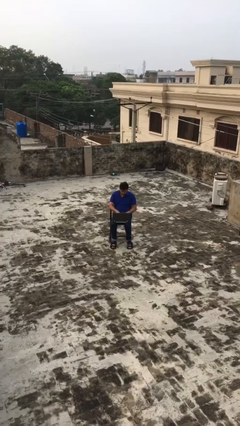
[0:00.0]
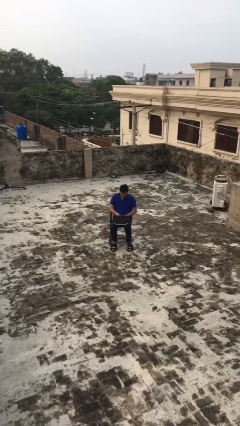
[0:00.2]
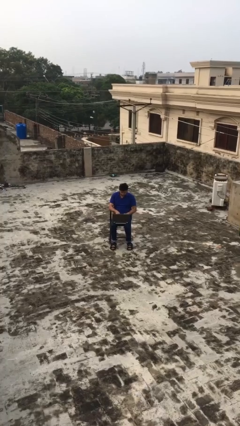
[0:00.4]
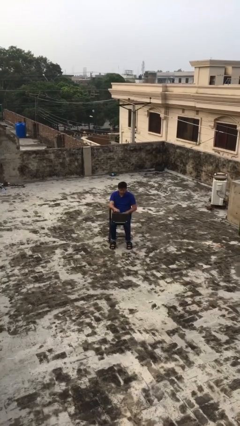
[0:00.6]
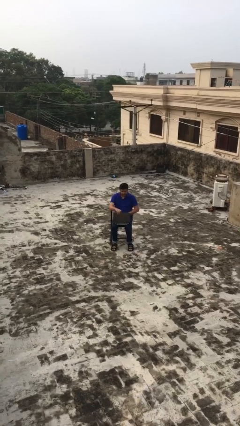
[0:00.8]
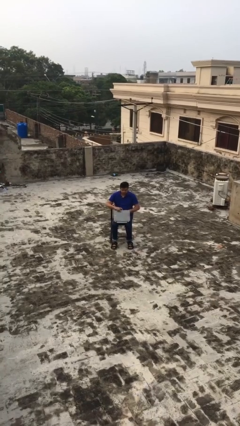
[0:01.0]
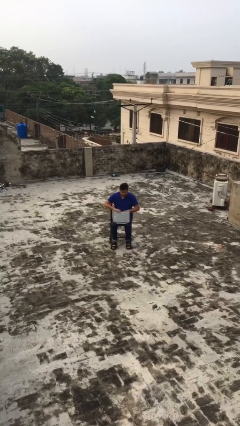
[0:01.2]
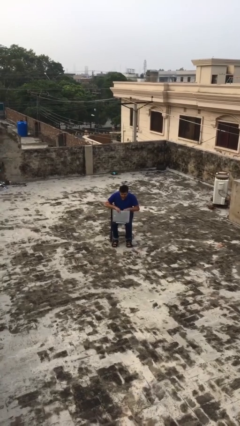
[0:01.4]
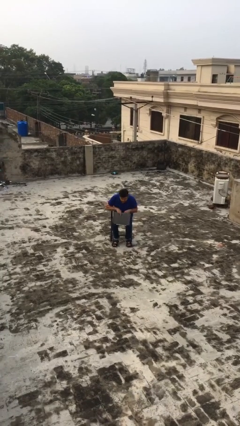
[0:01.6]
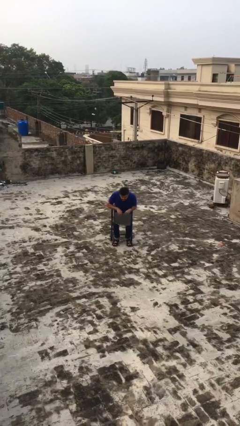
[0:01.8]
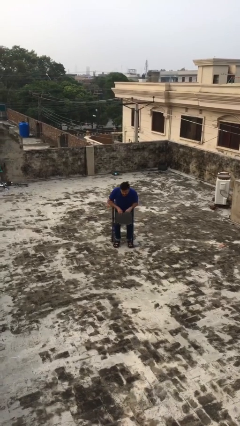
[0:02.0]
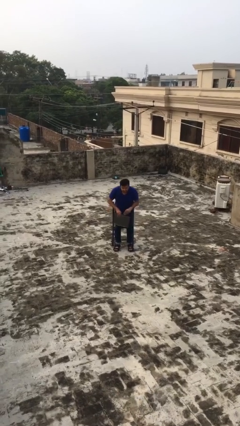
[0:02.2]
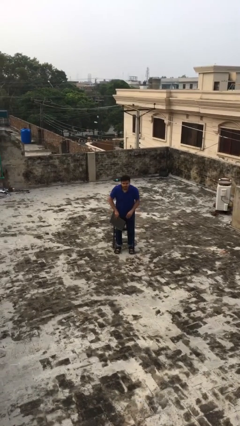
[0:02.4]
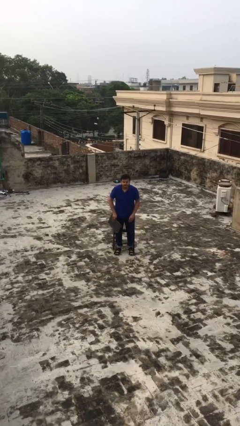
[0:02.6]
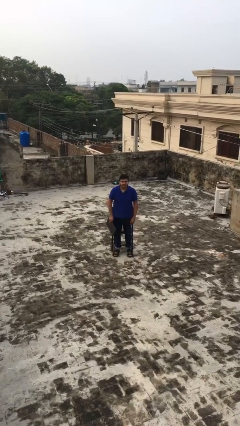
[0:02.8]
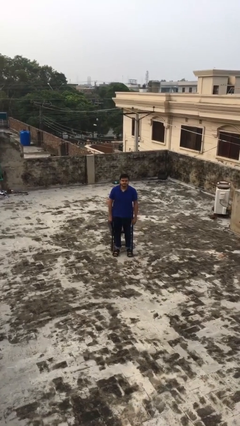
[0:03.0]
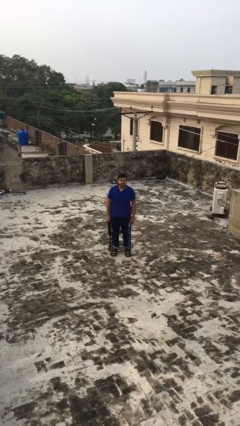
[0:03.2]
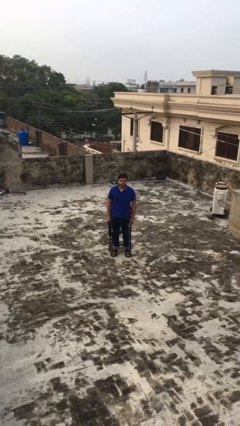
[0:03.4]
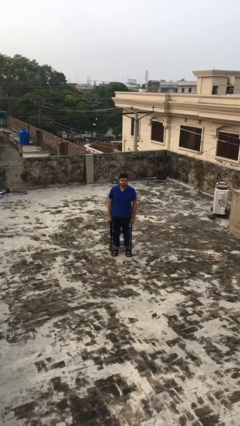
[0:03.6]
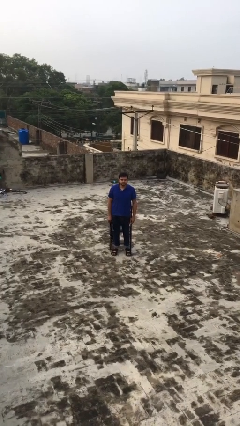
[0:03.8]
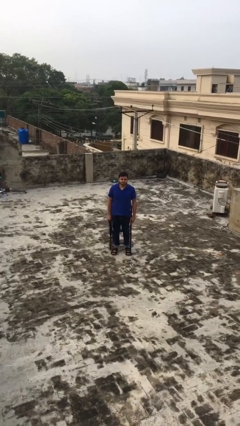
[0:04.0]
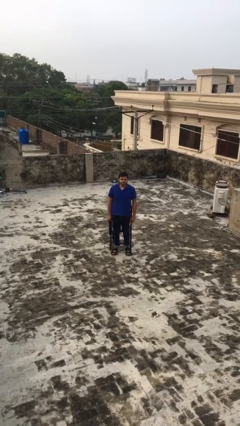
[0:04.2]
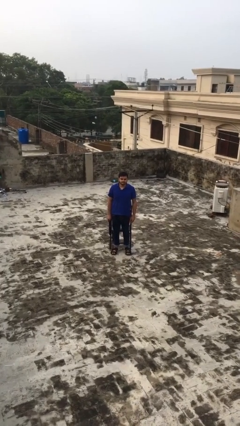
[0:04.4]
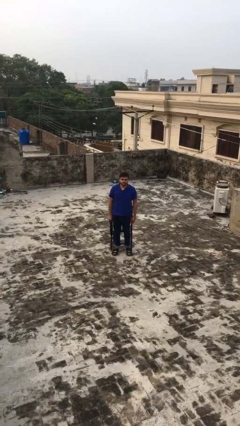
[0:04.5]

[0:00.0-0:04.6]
person stands up

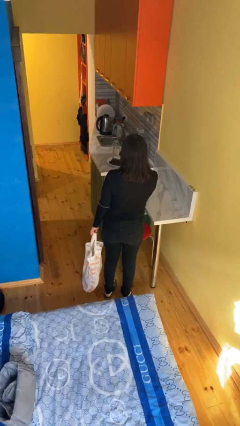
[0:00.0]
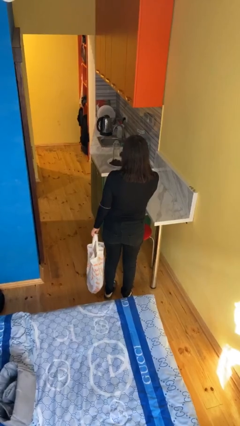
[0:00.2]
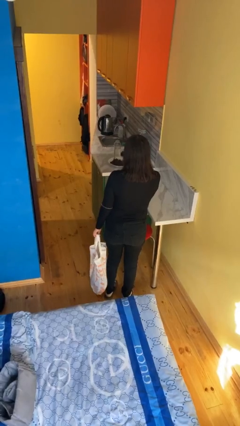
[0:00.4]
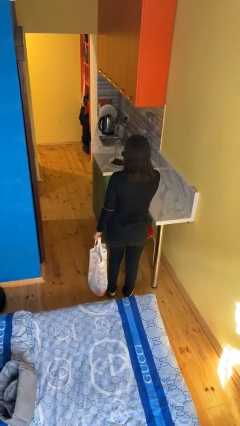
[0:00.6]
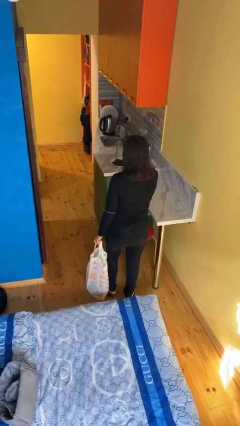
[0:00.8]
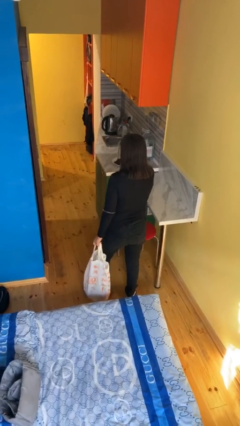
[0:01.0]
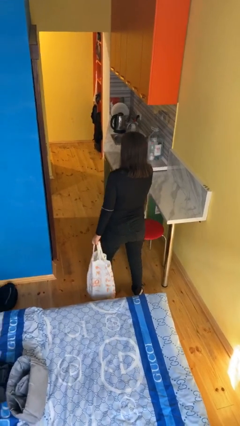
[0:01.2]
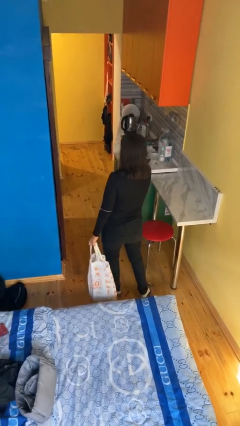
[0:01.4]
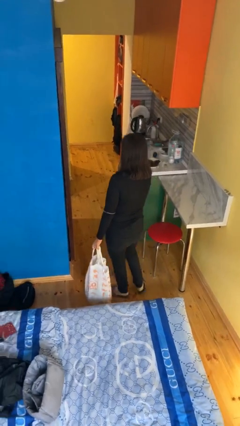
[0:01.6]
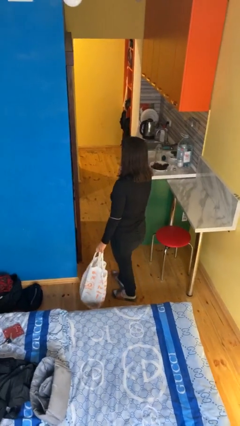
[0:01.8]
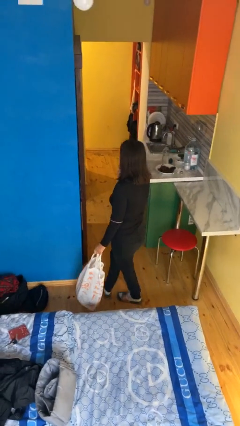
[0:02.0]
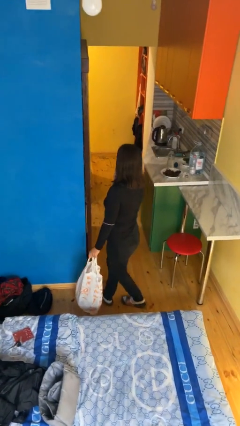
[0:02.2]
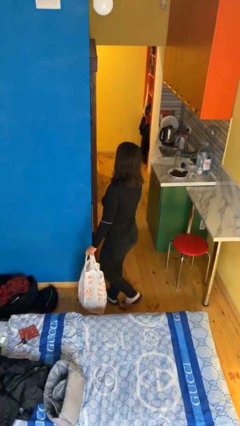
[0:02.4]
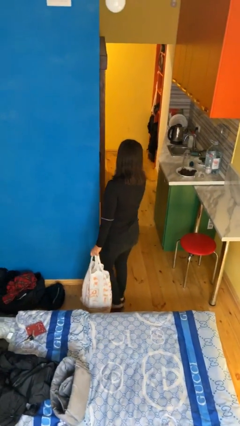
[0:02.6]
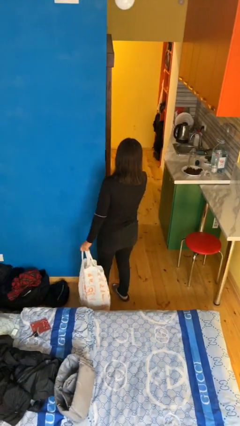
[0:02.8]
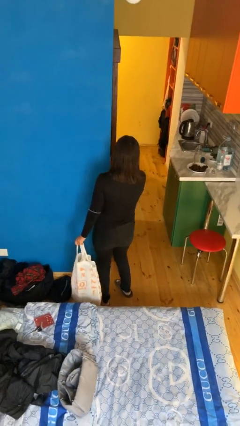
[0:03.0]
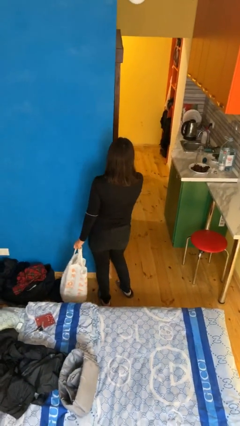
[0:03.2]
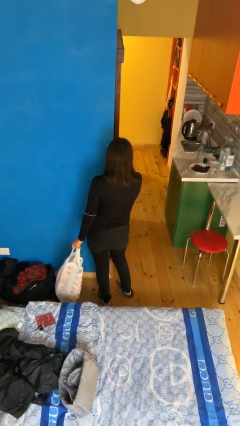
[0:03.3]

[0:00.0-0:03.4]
person carries groceries

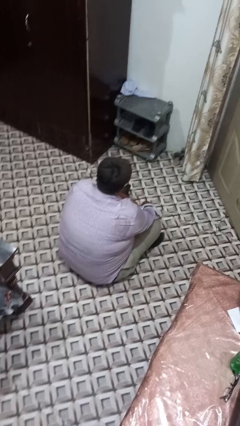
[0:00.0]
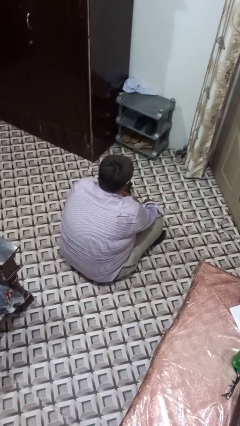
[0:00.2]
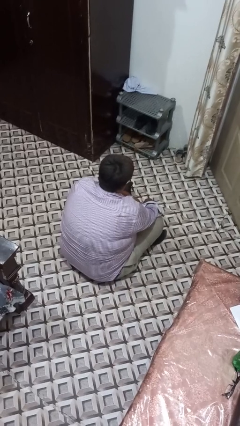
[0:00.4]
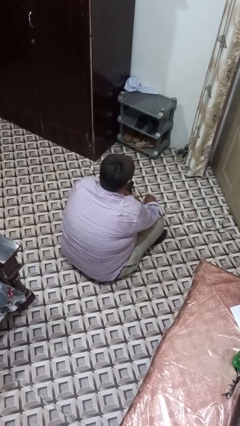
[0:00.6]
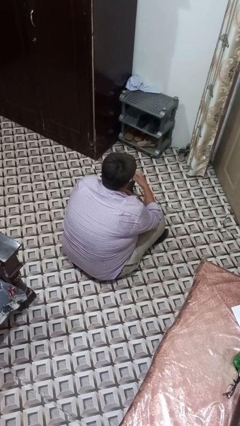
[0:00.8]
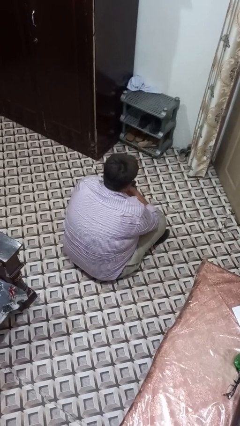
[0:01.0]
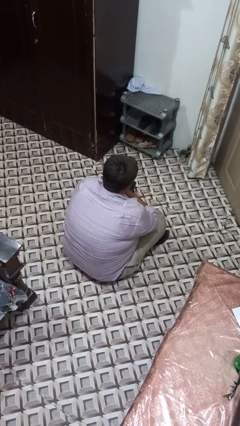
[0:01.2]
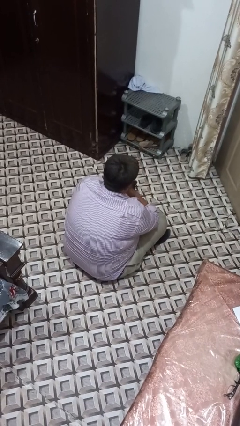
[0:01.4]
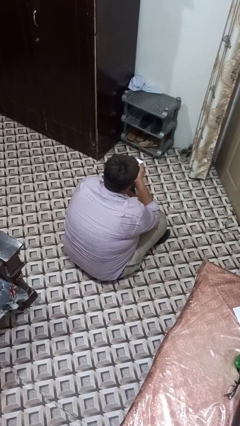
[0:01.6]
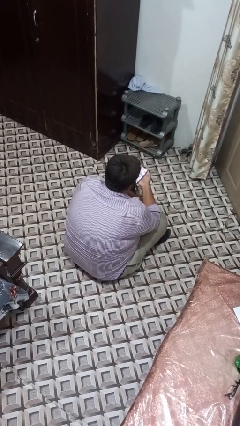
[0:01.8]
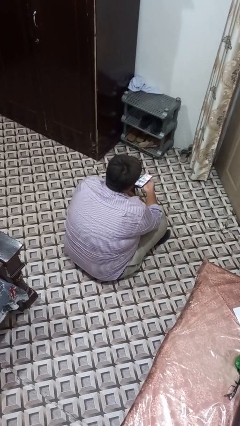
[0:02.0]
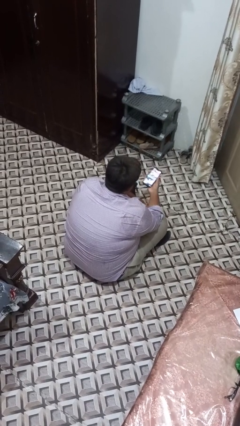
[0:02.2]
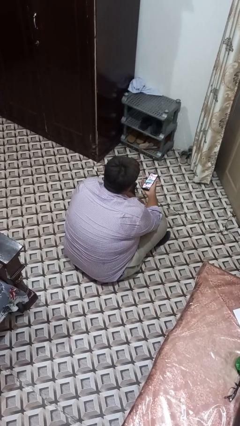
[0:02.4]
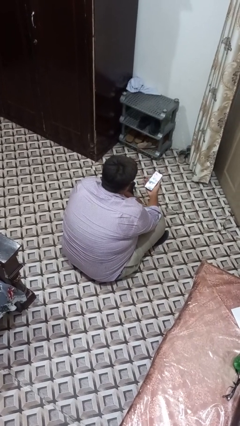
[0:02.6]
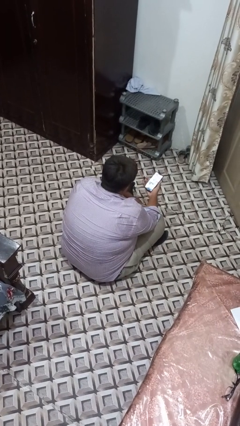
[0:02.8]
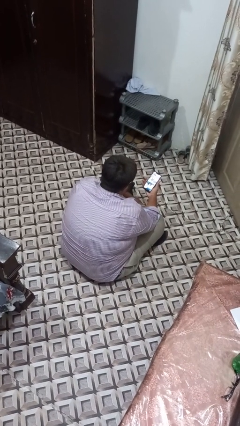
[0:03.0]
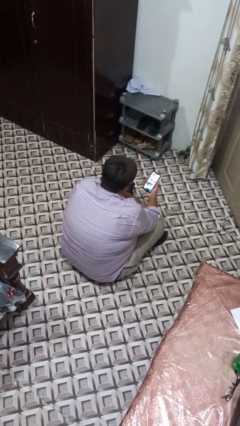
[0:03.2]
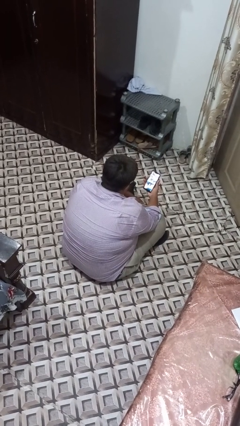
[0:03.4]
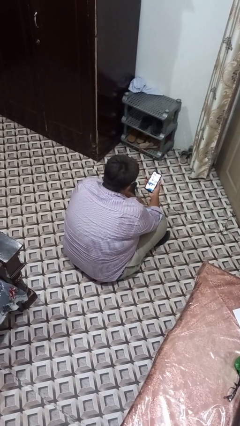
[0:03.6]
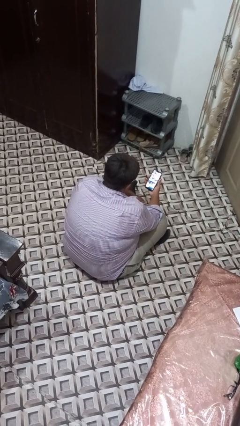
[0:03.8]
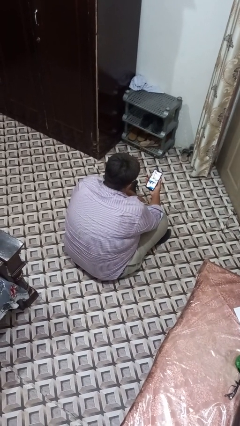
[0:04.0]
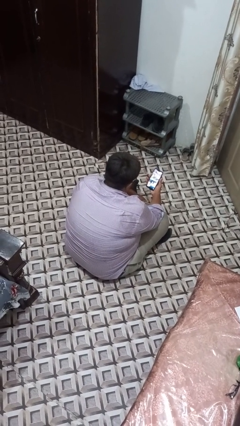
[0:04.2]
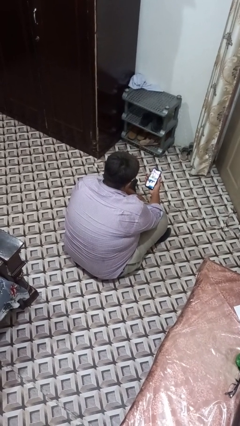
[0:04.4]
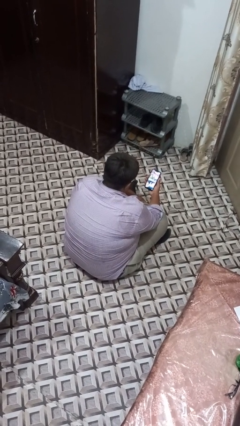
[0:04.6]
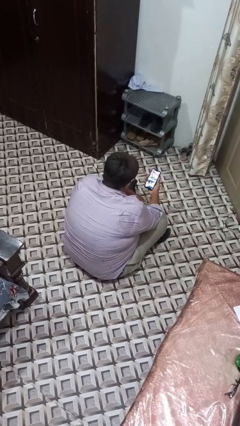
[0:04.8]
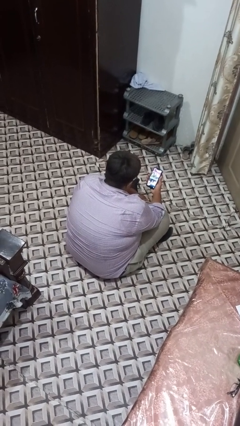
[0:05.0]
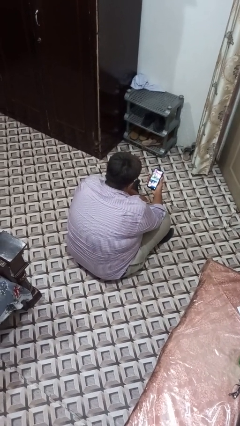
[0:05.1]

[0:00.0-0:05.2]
person takes phone from pocket

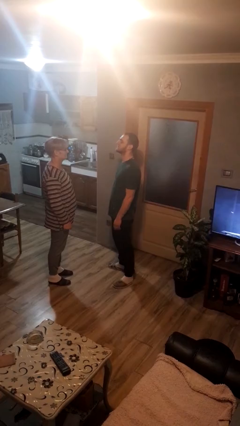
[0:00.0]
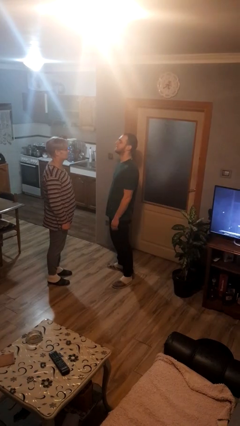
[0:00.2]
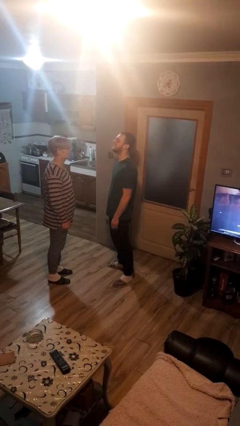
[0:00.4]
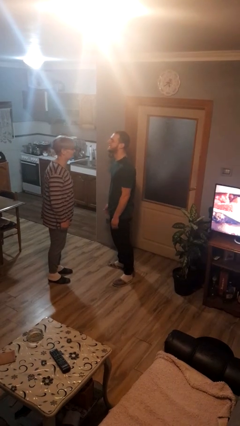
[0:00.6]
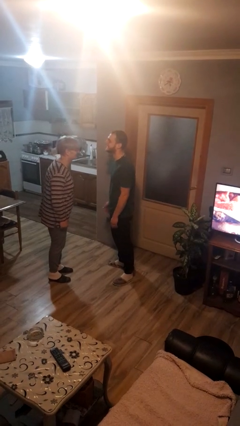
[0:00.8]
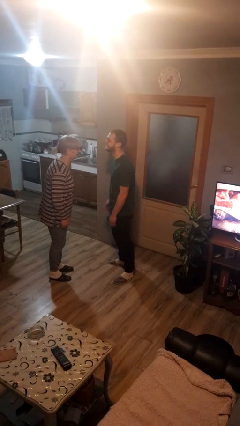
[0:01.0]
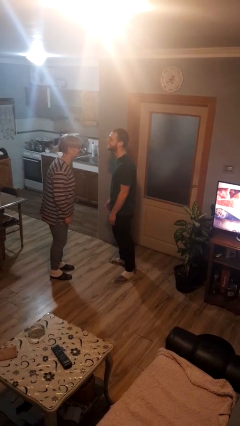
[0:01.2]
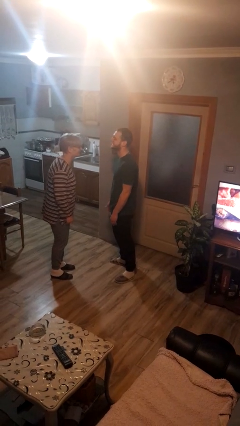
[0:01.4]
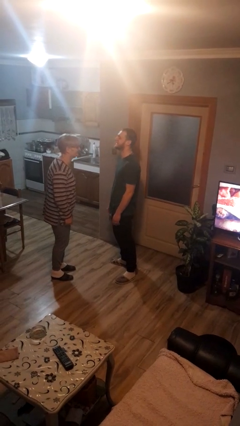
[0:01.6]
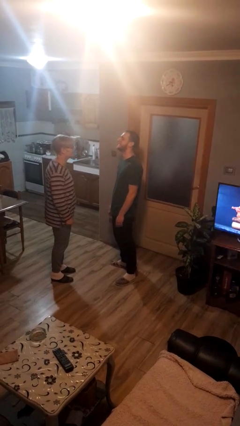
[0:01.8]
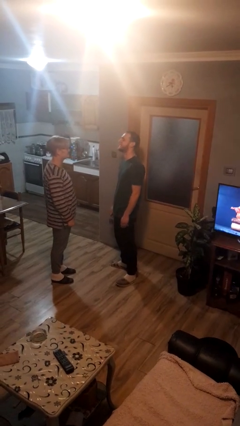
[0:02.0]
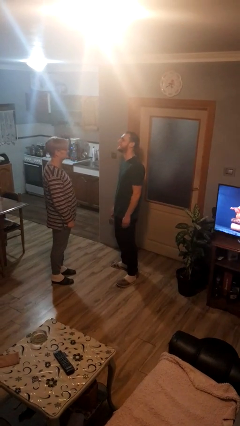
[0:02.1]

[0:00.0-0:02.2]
person laughs with person

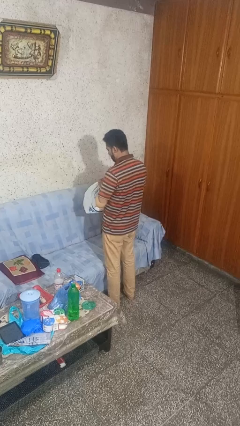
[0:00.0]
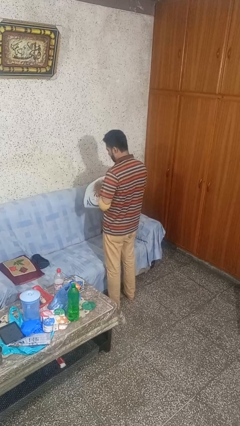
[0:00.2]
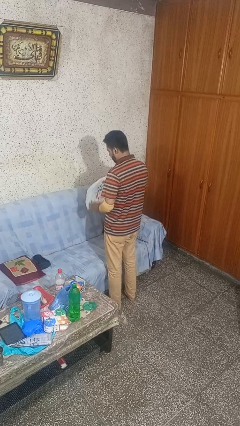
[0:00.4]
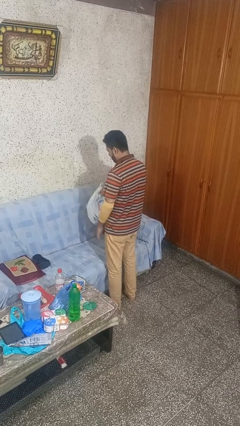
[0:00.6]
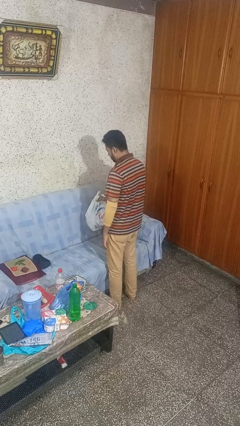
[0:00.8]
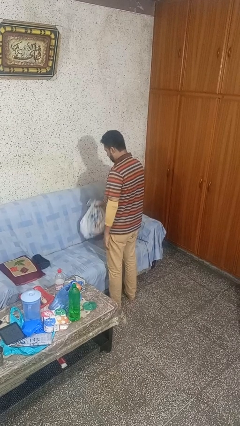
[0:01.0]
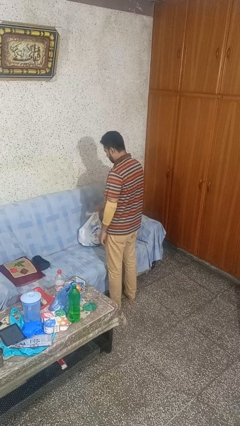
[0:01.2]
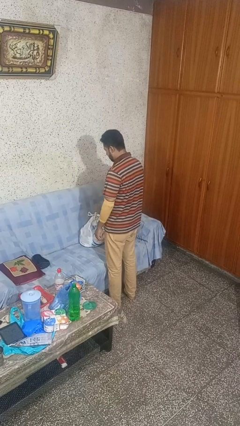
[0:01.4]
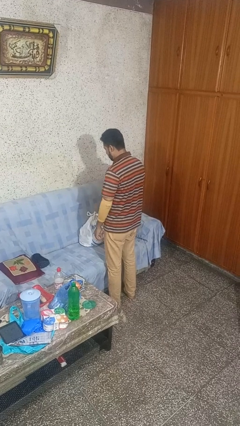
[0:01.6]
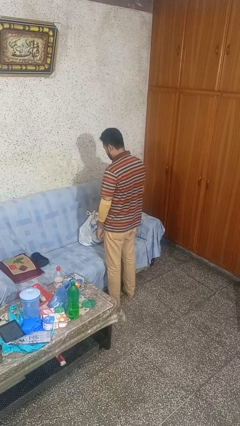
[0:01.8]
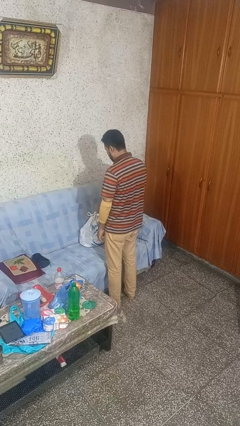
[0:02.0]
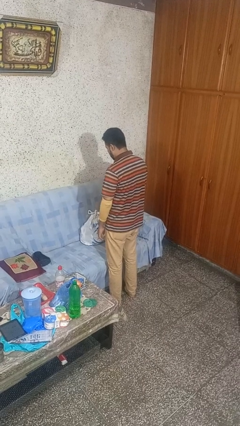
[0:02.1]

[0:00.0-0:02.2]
person puts down object on couch
